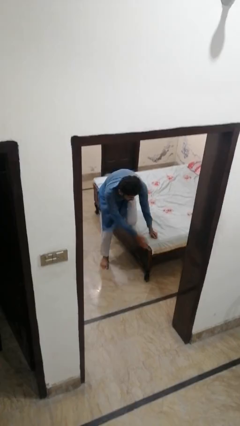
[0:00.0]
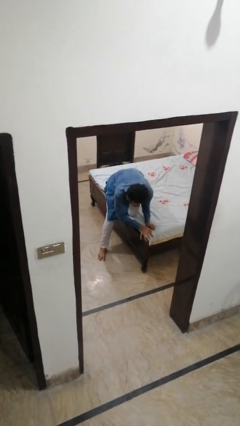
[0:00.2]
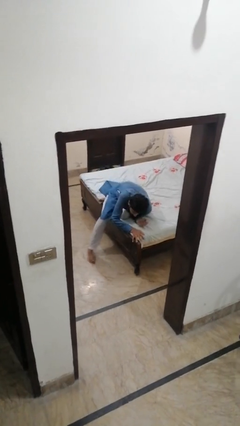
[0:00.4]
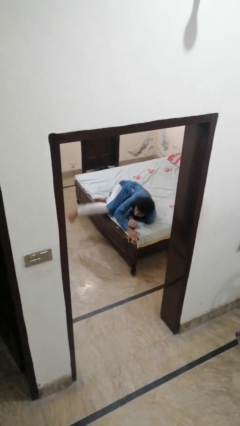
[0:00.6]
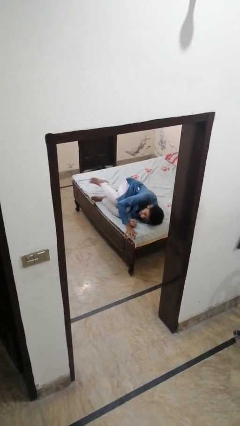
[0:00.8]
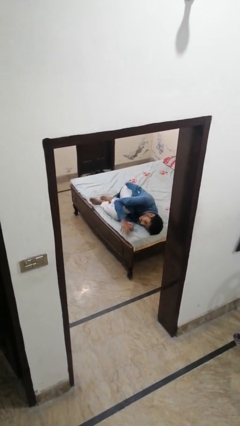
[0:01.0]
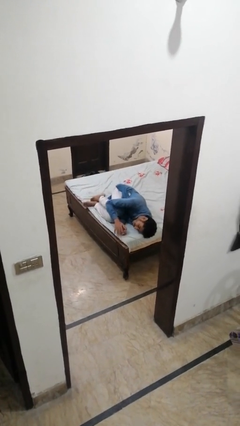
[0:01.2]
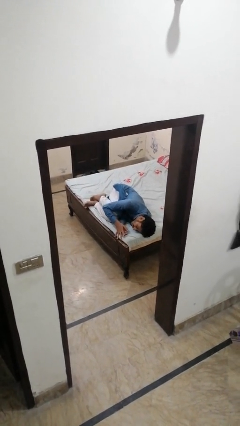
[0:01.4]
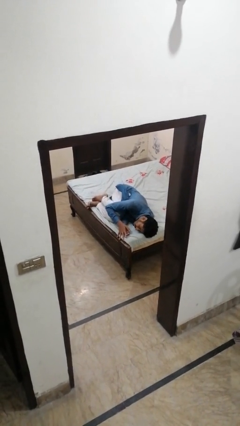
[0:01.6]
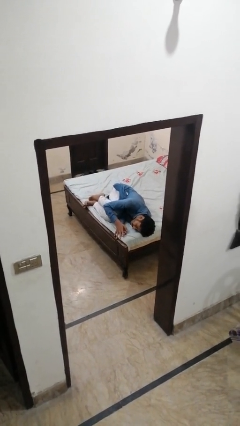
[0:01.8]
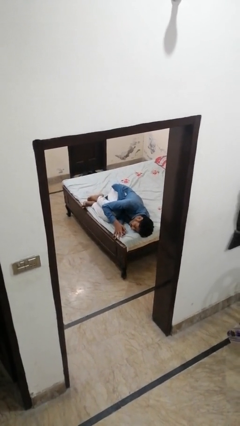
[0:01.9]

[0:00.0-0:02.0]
person lies down on bed

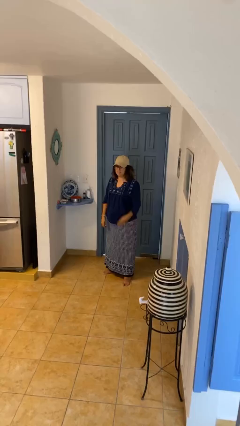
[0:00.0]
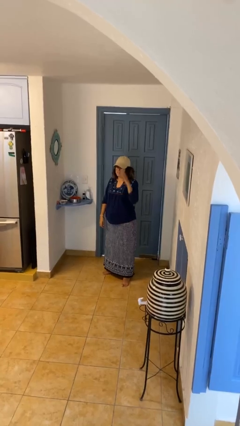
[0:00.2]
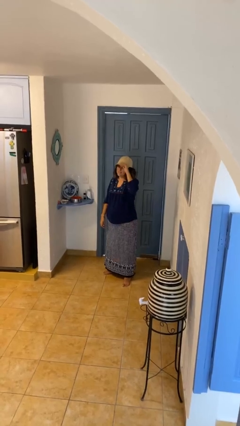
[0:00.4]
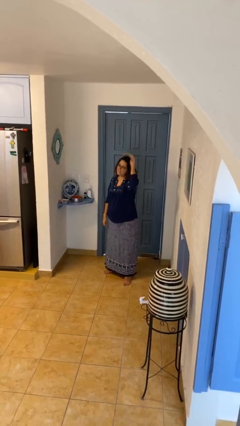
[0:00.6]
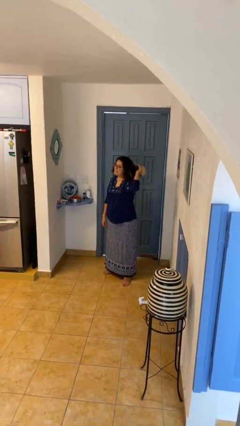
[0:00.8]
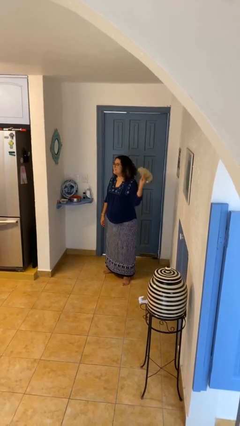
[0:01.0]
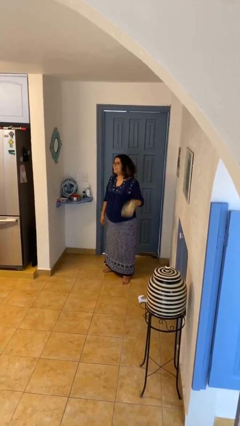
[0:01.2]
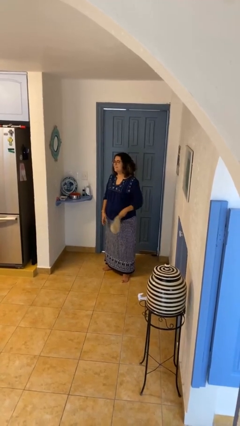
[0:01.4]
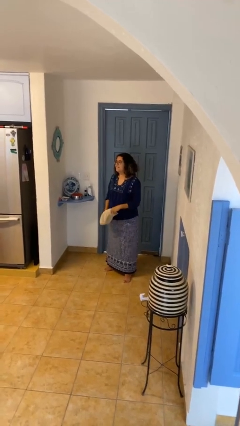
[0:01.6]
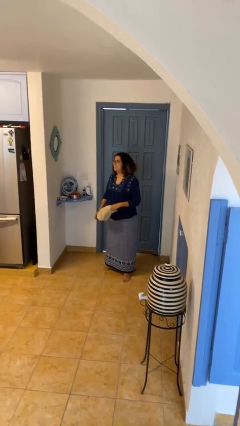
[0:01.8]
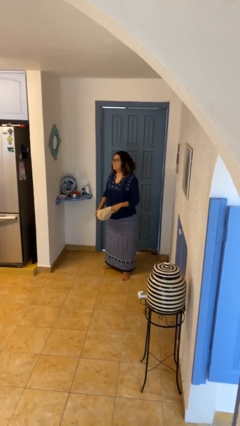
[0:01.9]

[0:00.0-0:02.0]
person takes off hat

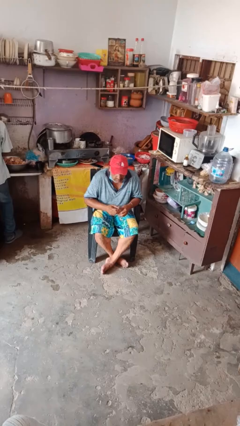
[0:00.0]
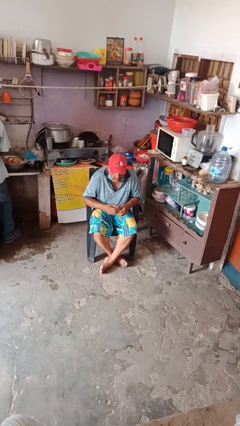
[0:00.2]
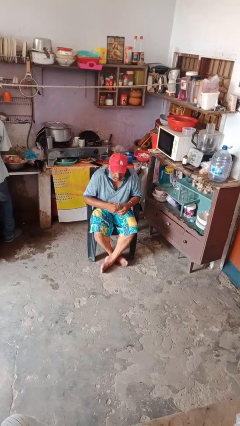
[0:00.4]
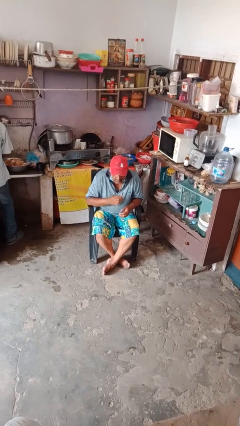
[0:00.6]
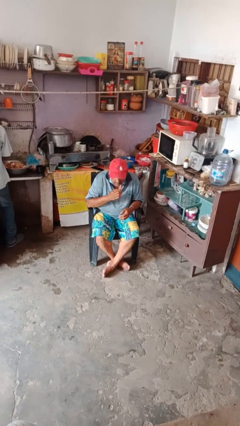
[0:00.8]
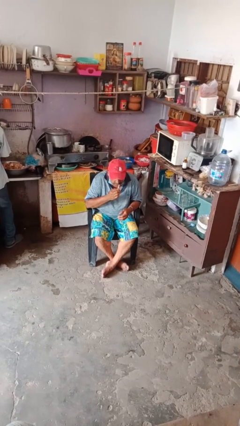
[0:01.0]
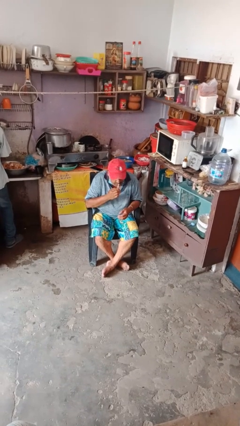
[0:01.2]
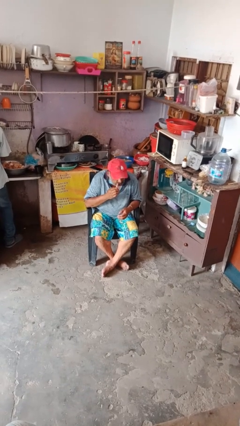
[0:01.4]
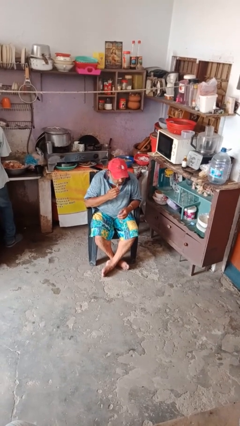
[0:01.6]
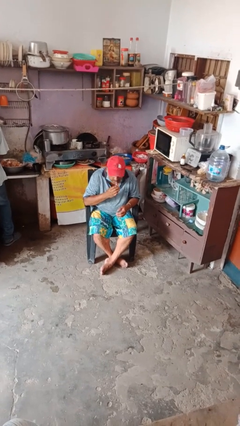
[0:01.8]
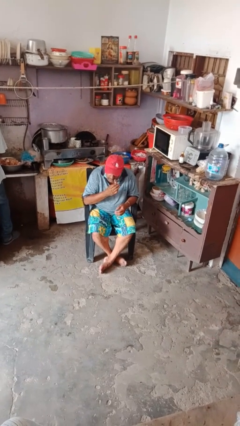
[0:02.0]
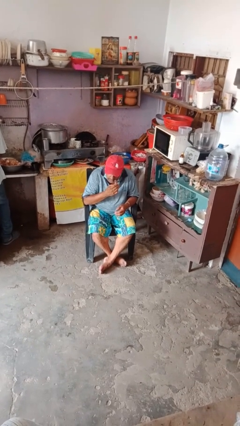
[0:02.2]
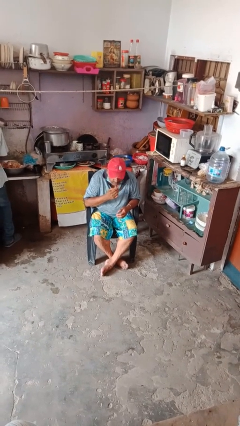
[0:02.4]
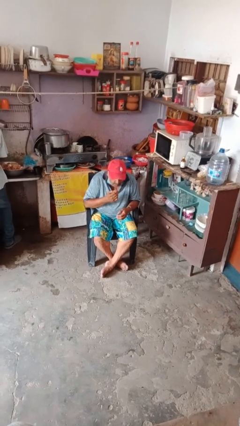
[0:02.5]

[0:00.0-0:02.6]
person applies lip makeup

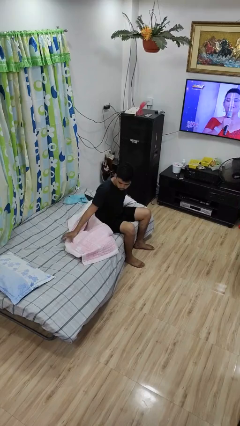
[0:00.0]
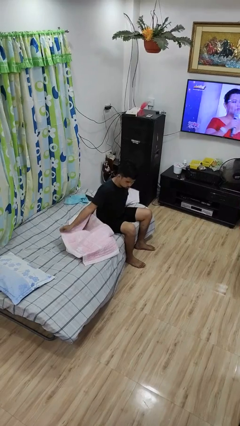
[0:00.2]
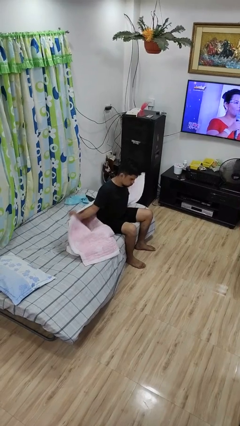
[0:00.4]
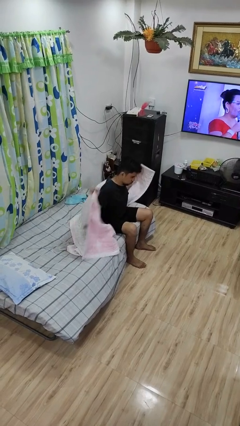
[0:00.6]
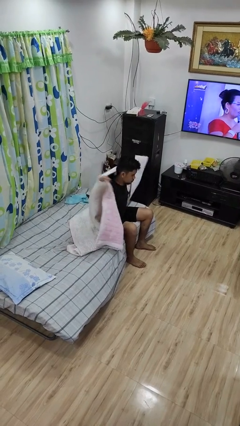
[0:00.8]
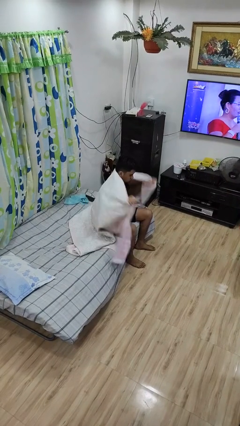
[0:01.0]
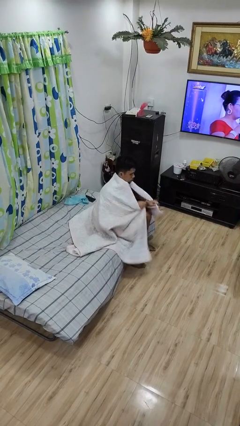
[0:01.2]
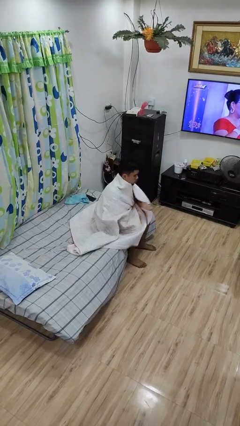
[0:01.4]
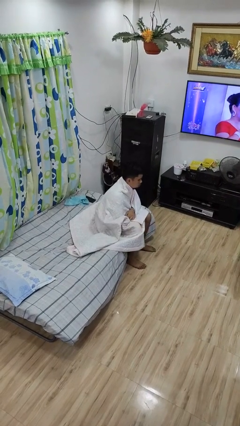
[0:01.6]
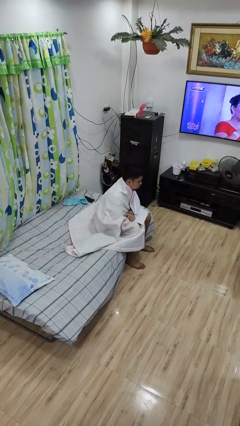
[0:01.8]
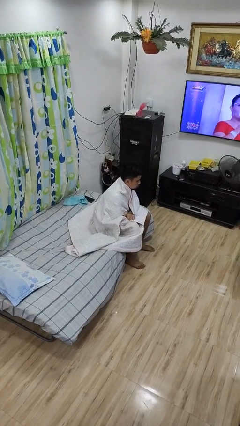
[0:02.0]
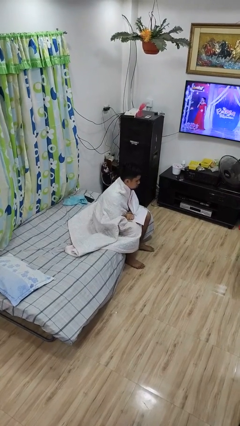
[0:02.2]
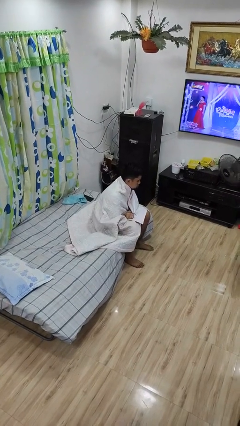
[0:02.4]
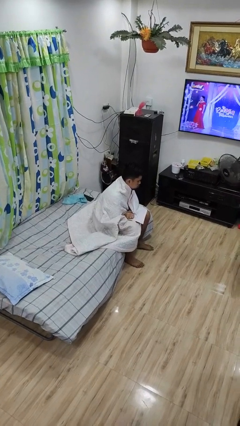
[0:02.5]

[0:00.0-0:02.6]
person covers with bedsheets

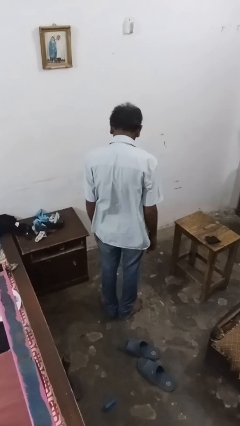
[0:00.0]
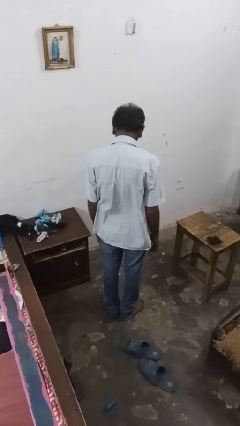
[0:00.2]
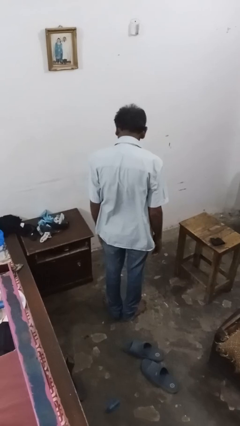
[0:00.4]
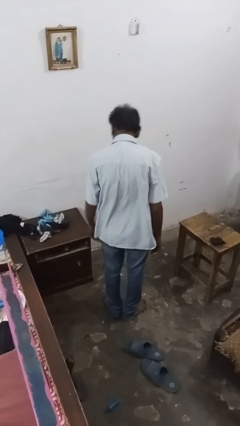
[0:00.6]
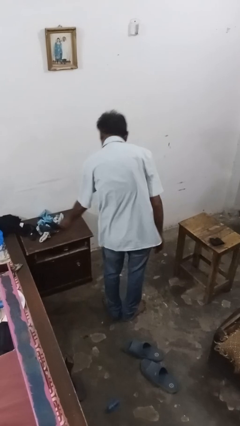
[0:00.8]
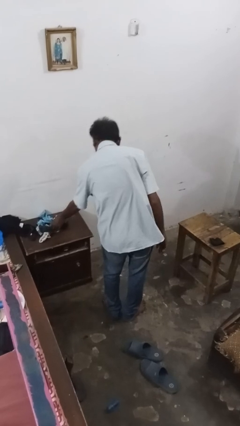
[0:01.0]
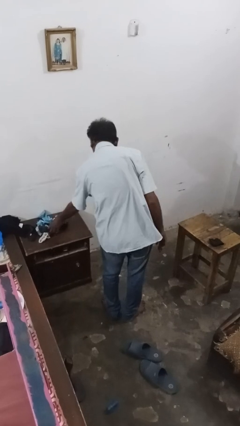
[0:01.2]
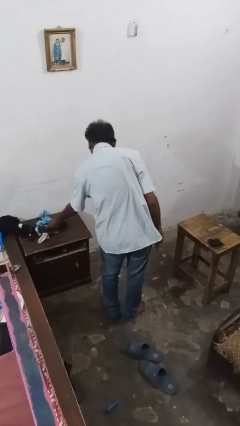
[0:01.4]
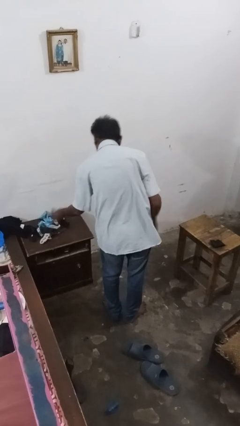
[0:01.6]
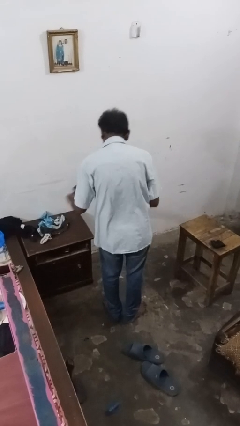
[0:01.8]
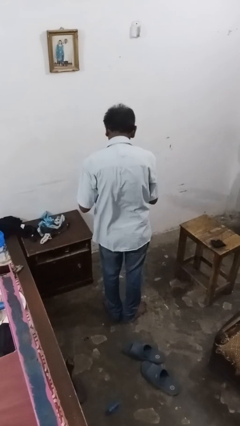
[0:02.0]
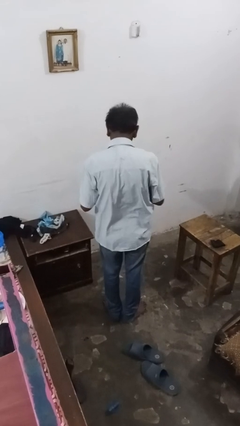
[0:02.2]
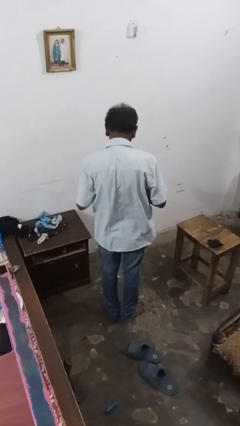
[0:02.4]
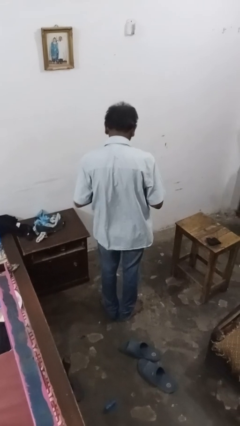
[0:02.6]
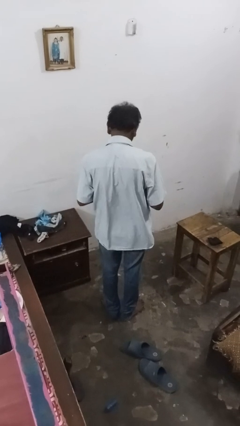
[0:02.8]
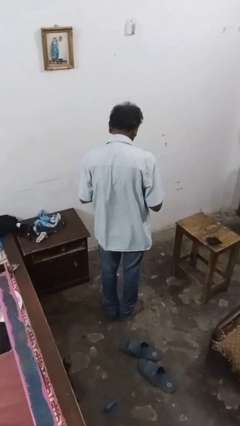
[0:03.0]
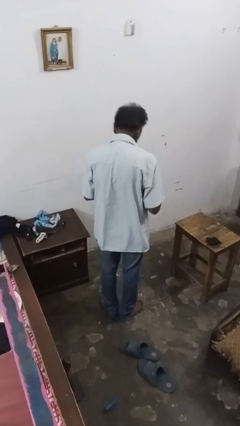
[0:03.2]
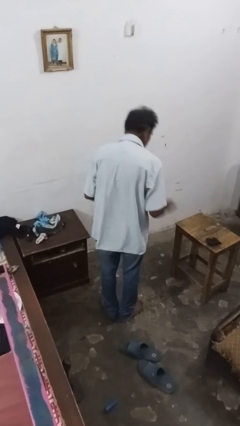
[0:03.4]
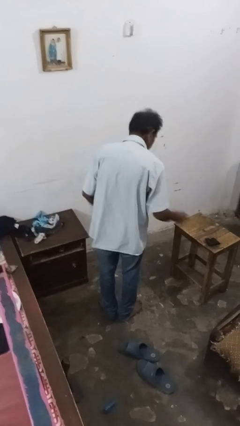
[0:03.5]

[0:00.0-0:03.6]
person folds socks

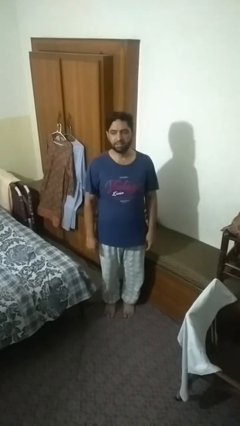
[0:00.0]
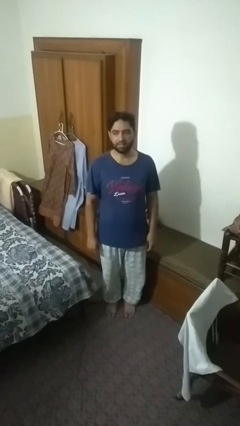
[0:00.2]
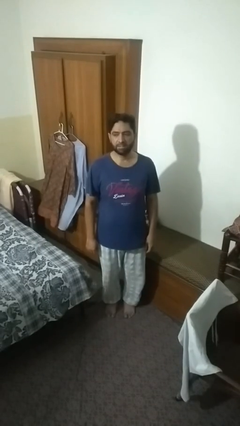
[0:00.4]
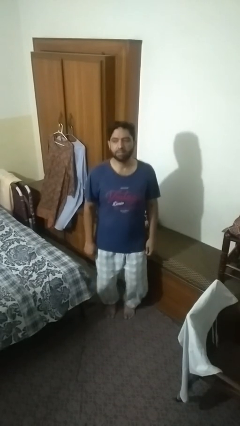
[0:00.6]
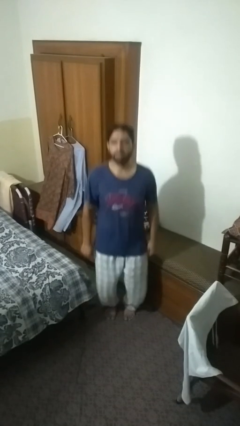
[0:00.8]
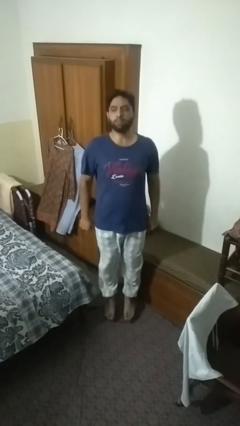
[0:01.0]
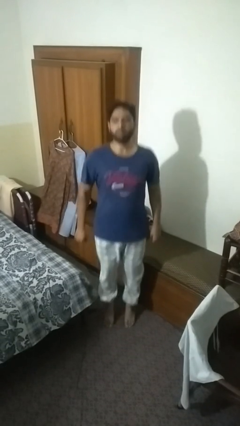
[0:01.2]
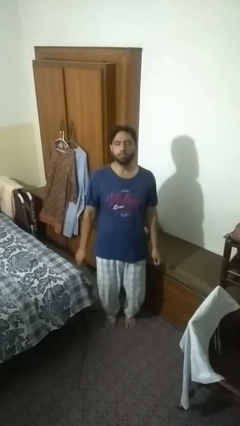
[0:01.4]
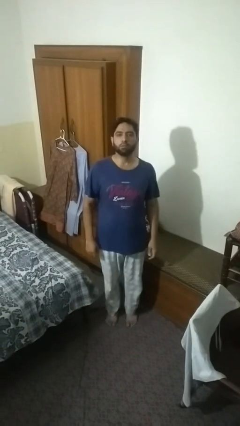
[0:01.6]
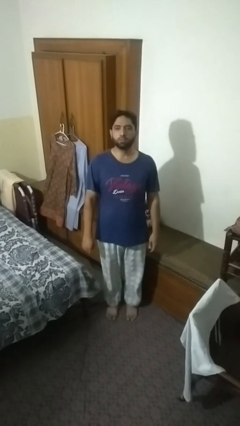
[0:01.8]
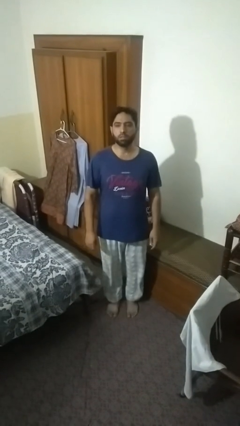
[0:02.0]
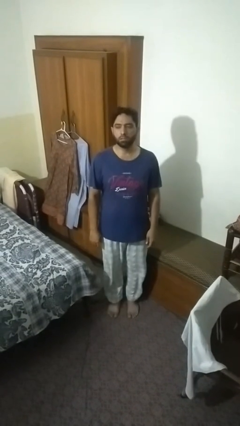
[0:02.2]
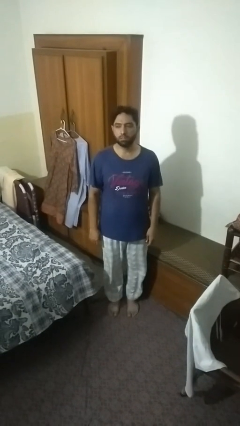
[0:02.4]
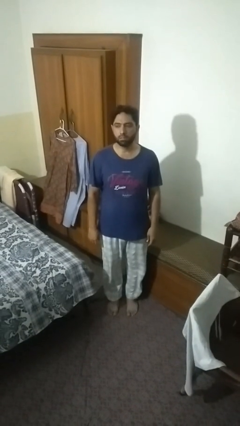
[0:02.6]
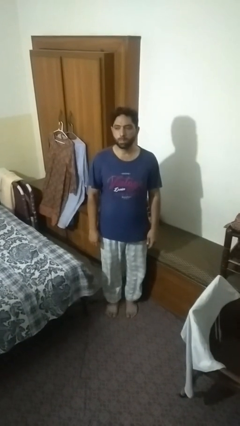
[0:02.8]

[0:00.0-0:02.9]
person jumps

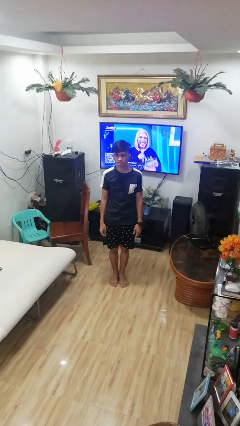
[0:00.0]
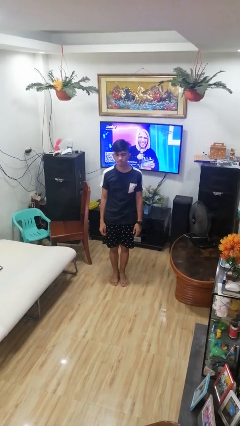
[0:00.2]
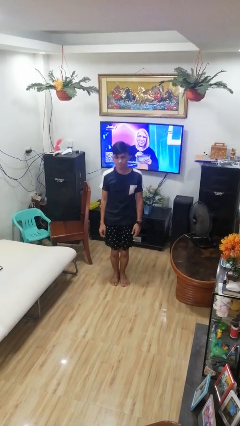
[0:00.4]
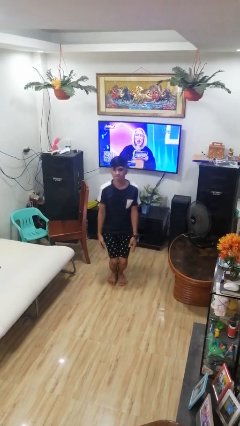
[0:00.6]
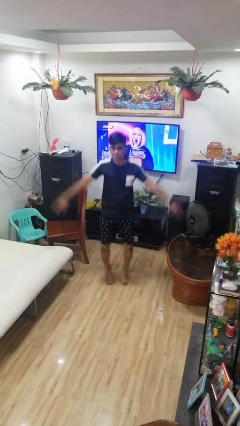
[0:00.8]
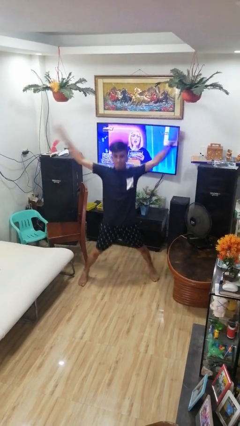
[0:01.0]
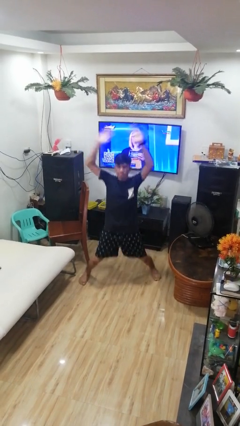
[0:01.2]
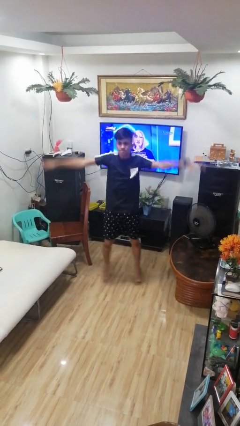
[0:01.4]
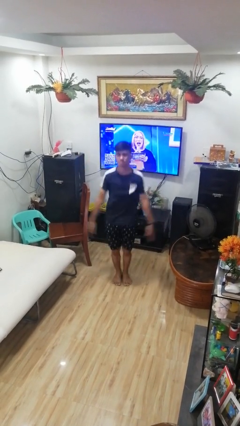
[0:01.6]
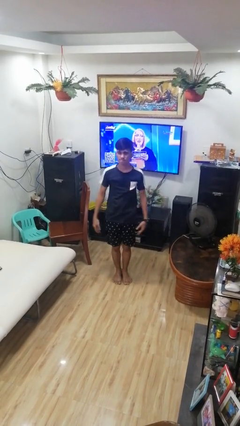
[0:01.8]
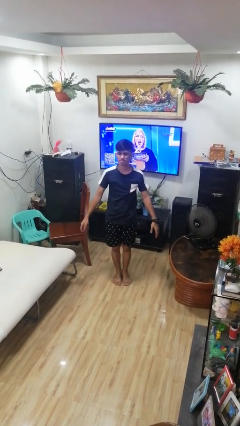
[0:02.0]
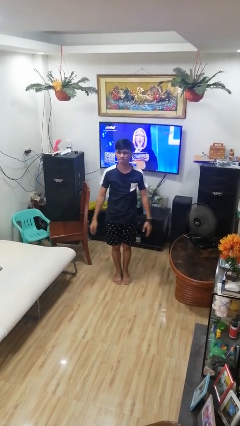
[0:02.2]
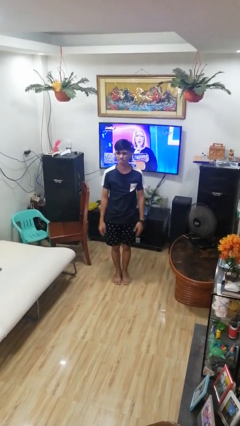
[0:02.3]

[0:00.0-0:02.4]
person exercises with jumping jacks
